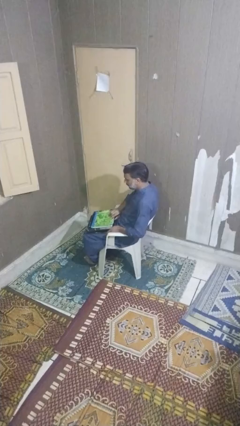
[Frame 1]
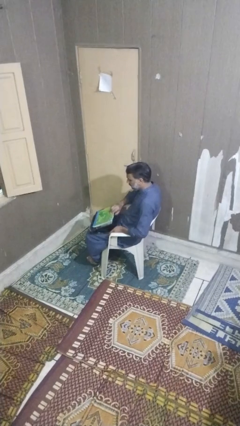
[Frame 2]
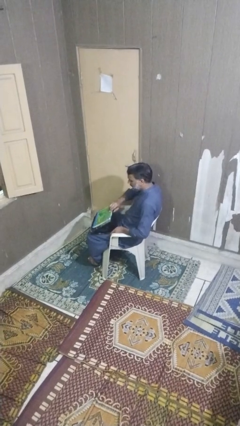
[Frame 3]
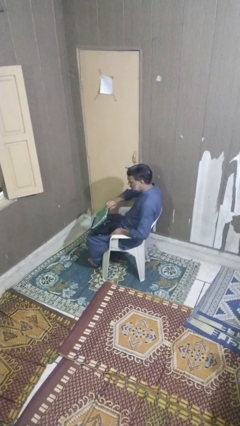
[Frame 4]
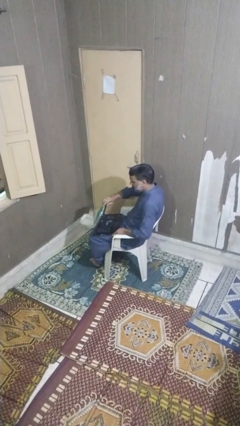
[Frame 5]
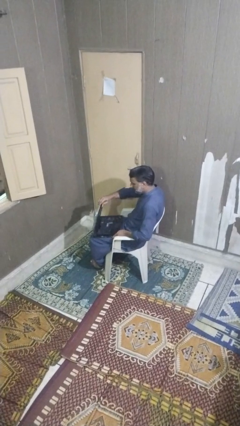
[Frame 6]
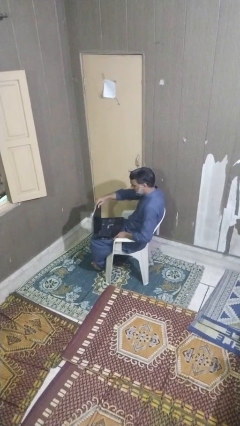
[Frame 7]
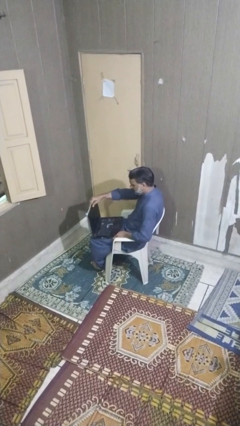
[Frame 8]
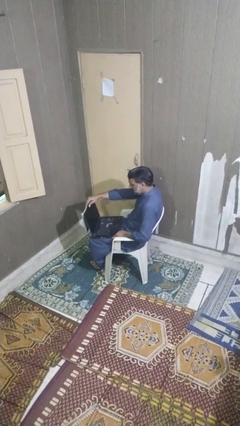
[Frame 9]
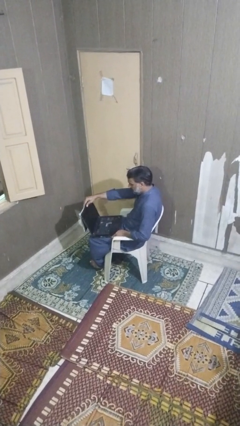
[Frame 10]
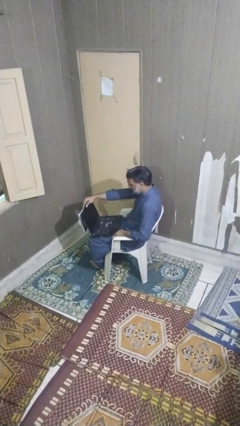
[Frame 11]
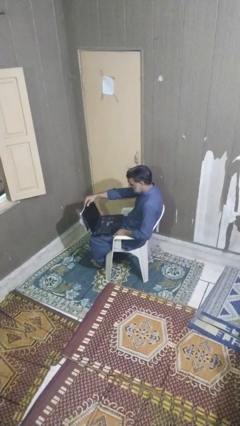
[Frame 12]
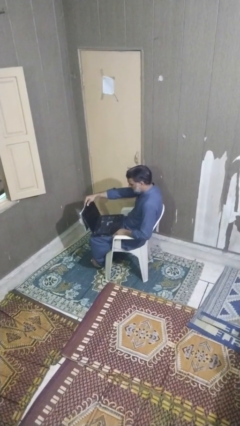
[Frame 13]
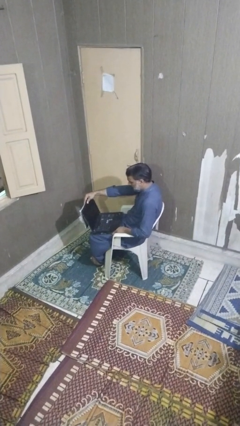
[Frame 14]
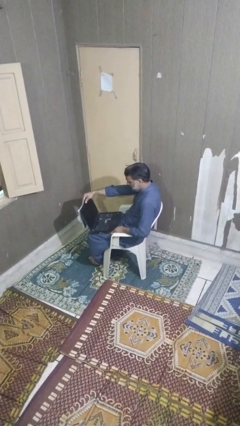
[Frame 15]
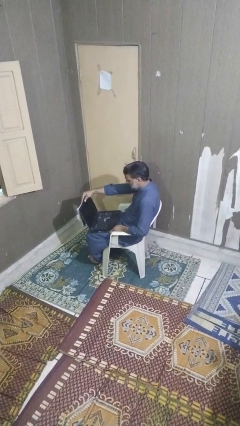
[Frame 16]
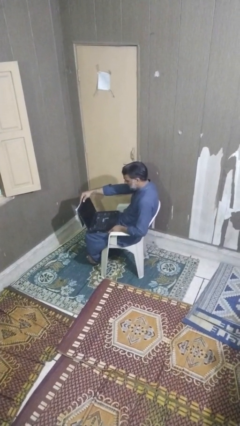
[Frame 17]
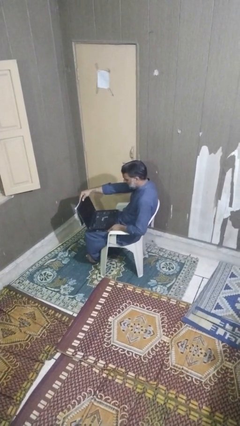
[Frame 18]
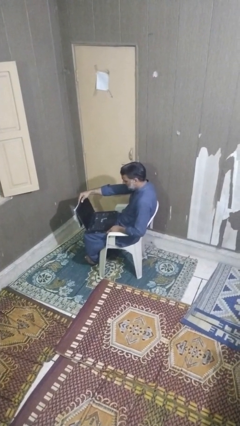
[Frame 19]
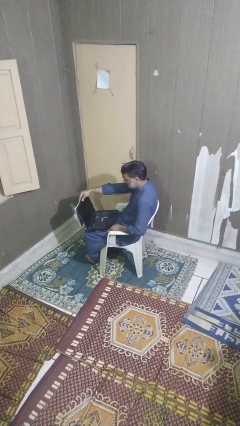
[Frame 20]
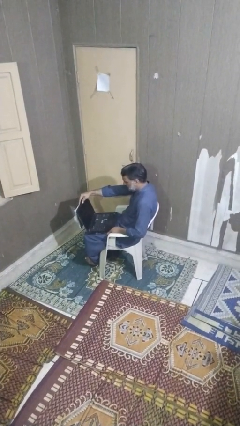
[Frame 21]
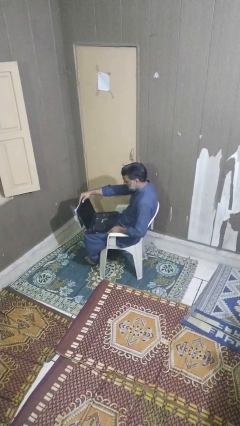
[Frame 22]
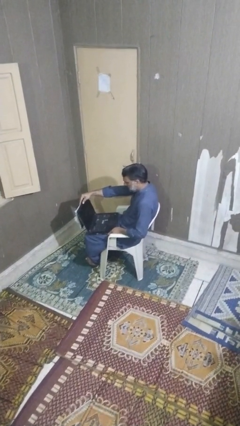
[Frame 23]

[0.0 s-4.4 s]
person opens laptop

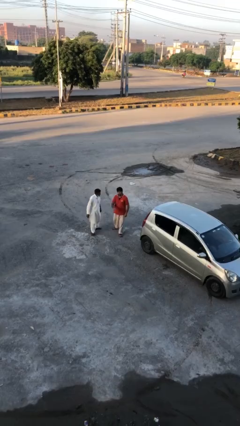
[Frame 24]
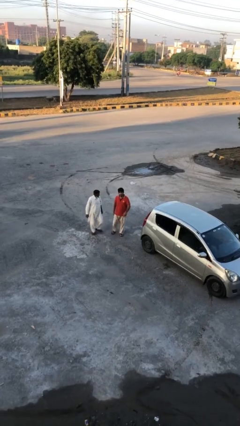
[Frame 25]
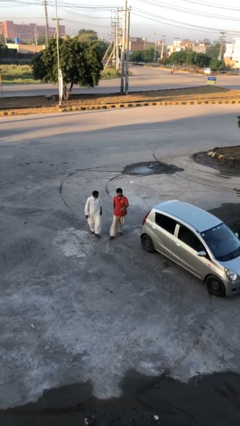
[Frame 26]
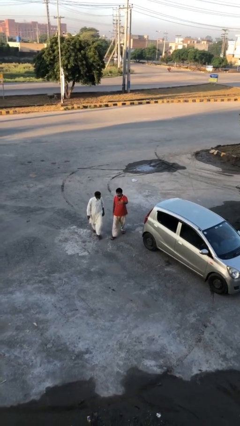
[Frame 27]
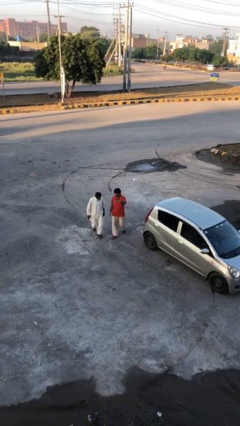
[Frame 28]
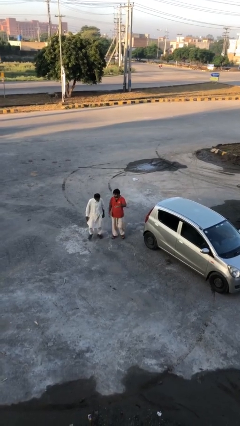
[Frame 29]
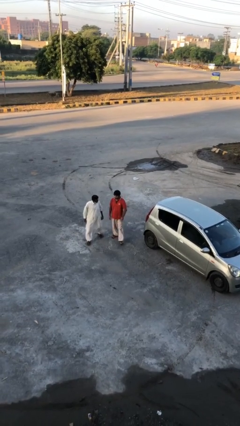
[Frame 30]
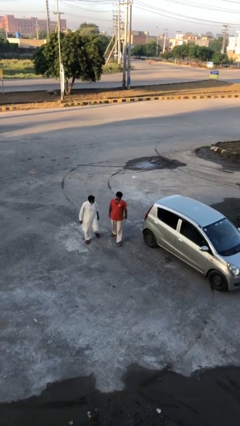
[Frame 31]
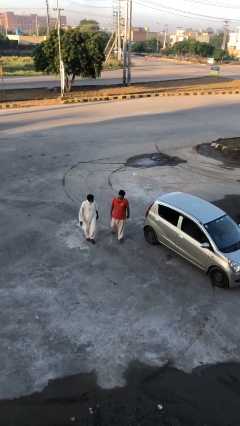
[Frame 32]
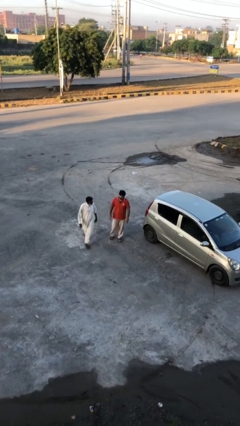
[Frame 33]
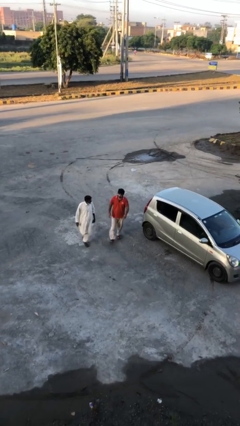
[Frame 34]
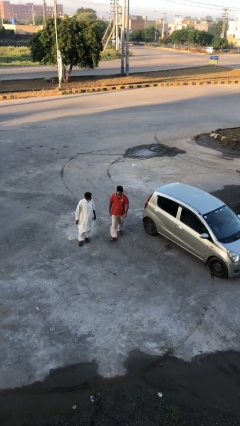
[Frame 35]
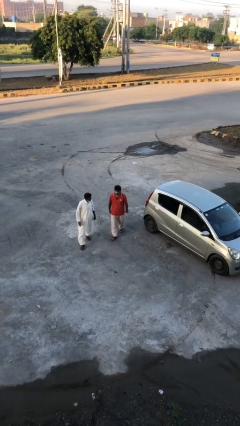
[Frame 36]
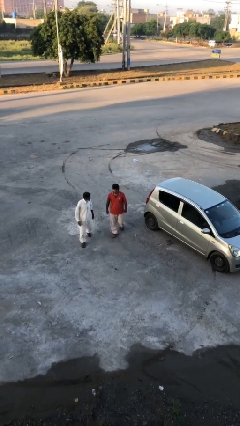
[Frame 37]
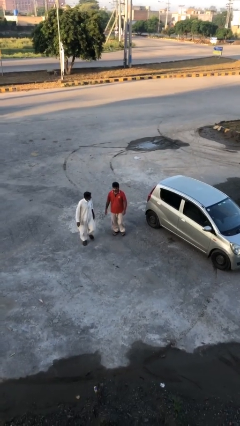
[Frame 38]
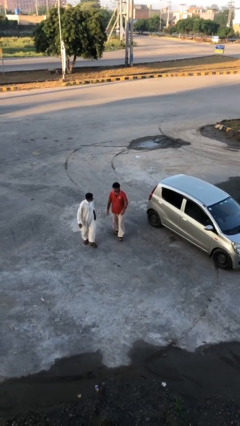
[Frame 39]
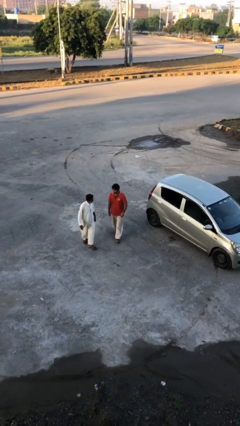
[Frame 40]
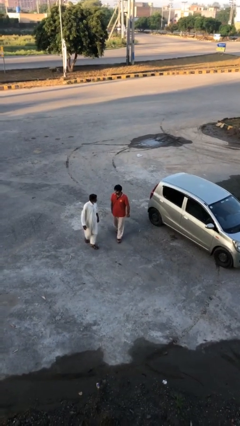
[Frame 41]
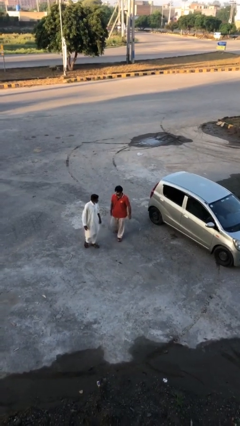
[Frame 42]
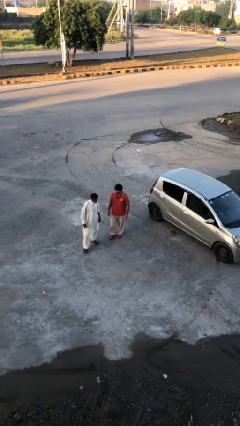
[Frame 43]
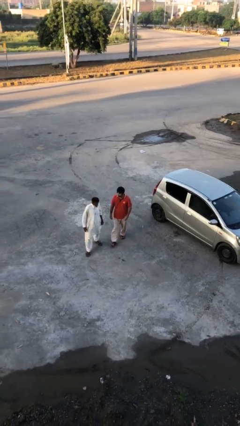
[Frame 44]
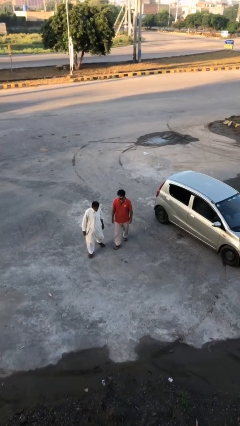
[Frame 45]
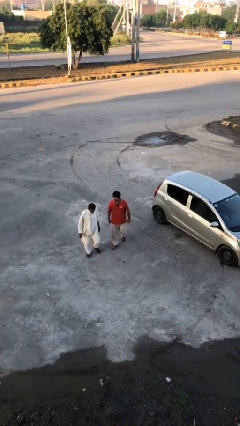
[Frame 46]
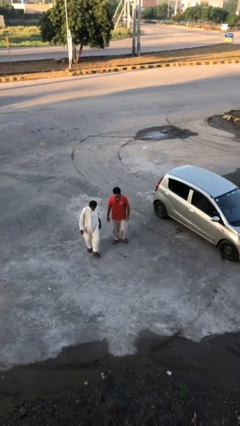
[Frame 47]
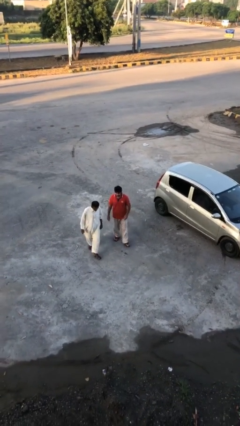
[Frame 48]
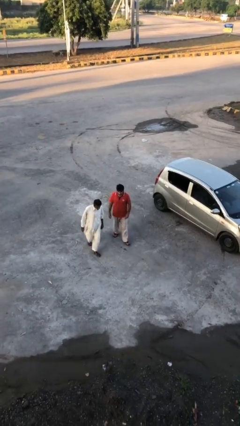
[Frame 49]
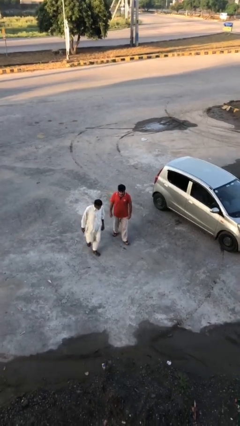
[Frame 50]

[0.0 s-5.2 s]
person talks to person

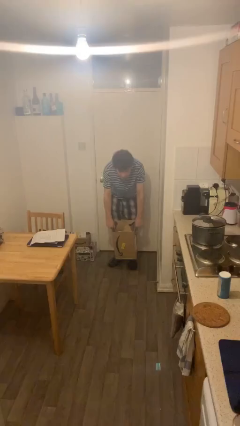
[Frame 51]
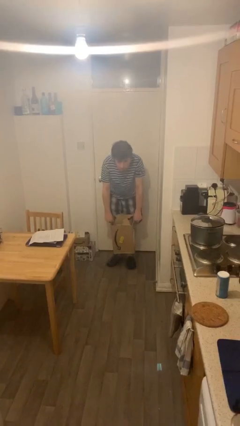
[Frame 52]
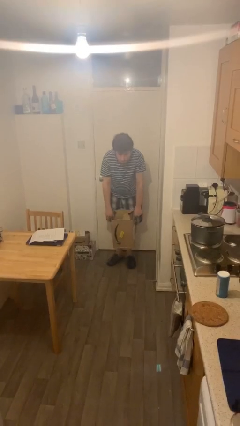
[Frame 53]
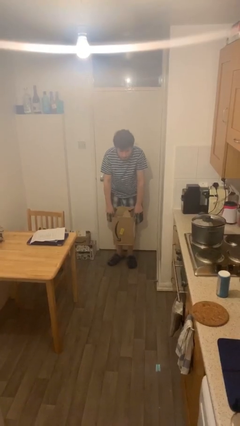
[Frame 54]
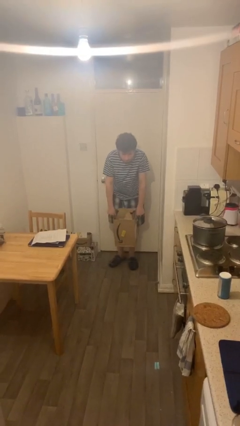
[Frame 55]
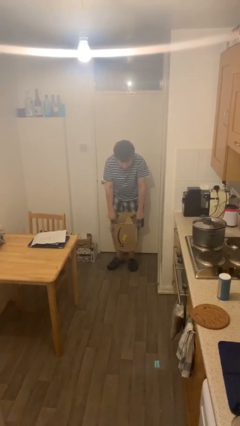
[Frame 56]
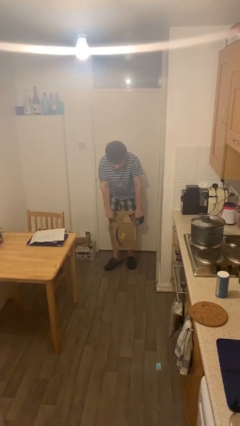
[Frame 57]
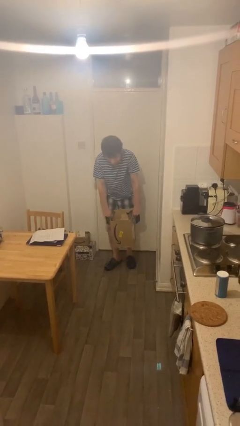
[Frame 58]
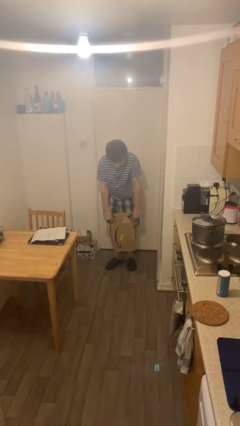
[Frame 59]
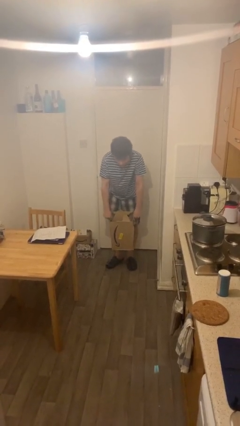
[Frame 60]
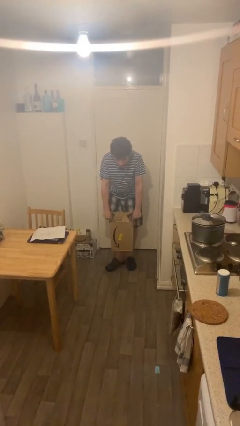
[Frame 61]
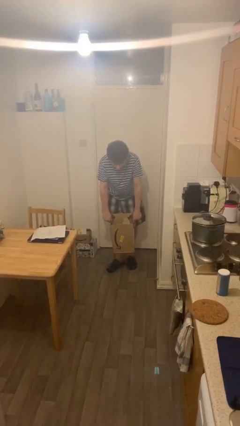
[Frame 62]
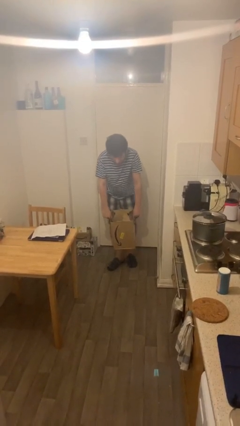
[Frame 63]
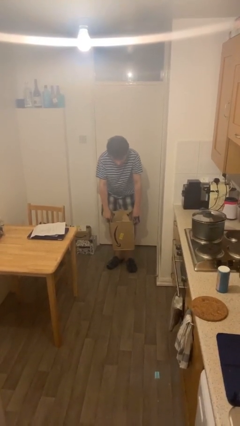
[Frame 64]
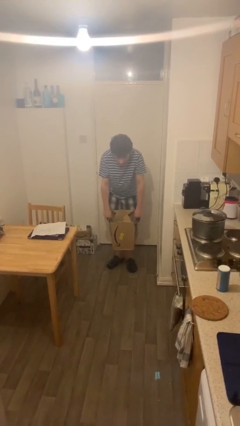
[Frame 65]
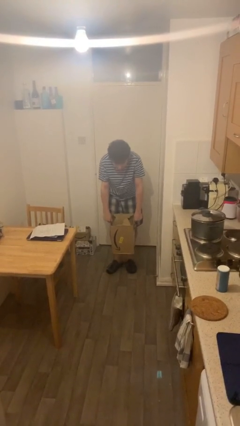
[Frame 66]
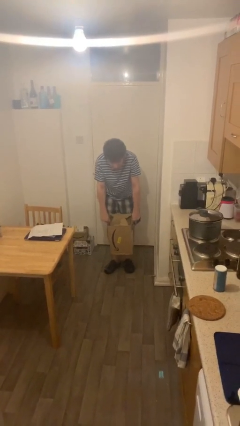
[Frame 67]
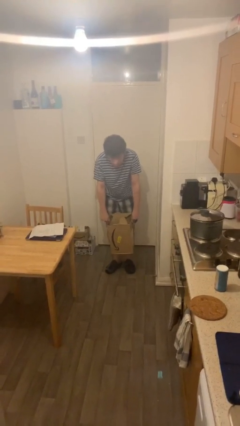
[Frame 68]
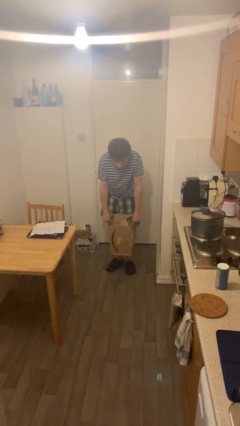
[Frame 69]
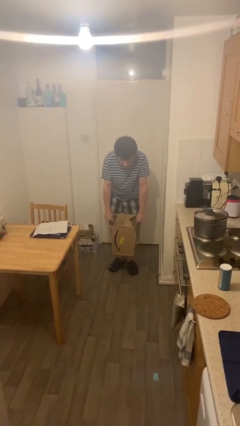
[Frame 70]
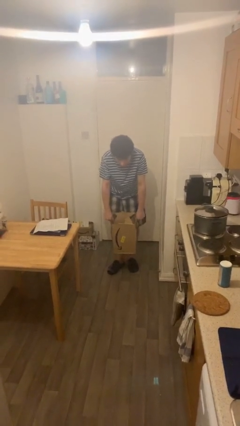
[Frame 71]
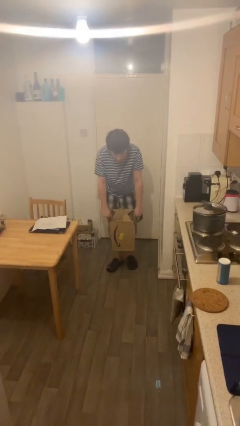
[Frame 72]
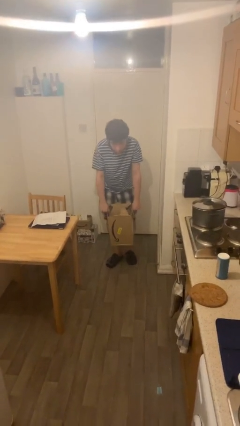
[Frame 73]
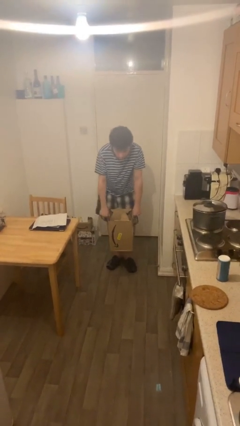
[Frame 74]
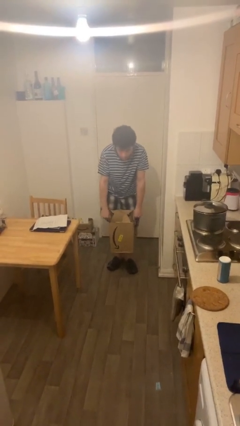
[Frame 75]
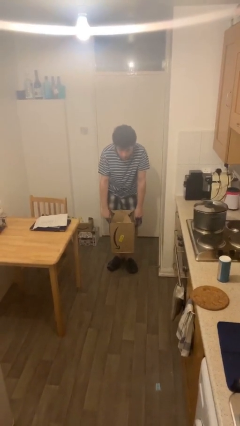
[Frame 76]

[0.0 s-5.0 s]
person carries heavy object

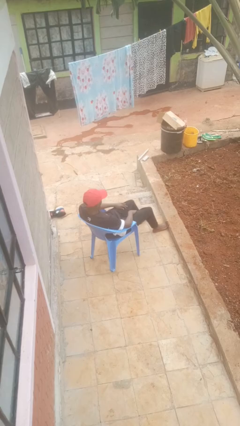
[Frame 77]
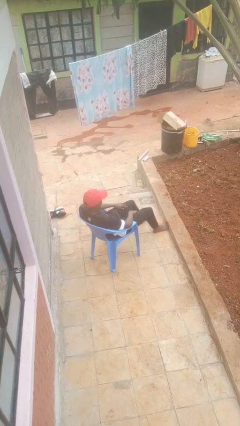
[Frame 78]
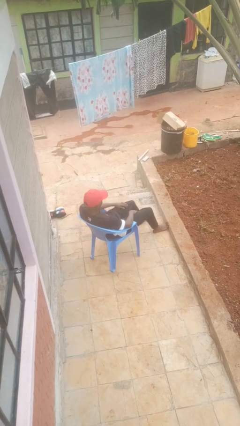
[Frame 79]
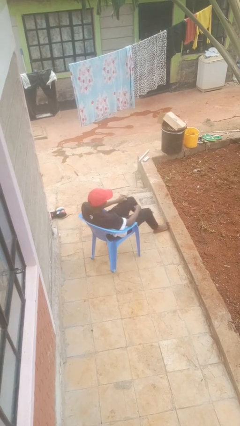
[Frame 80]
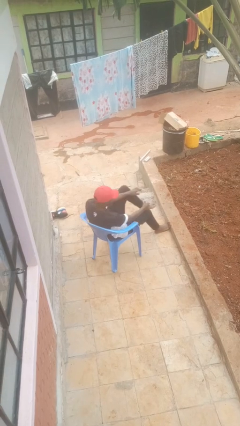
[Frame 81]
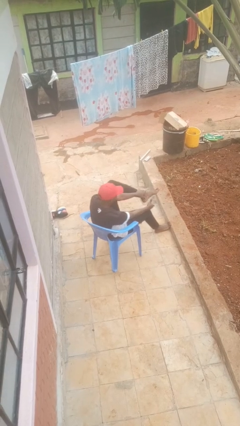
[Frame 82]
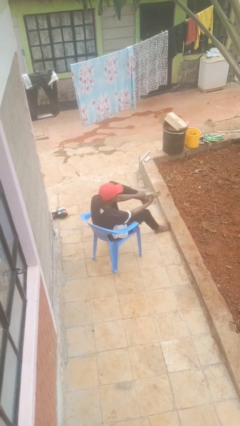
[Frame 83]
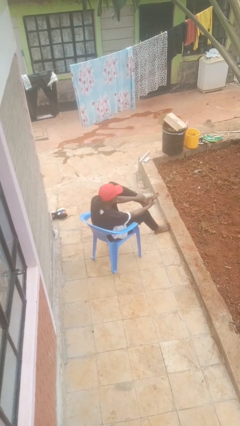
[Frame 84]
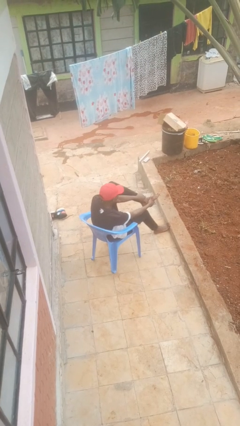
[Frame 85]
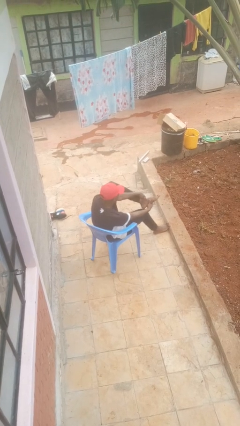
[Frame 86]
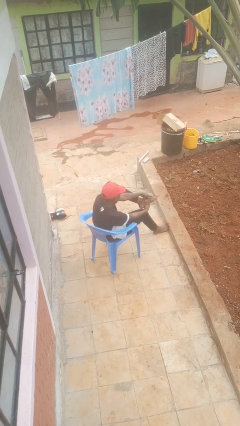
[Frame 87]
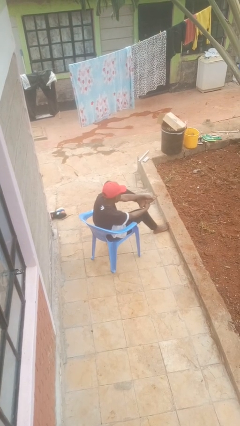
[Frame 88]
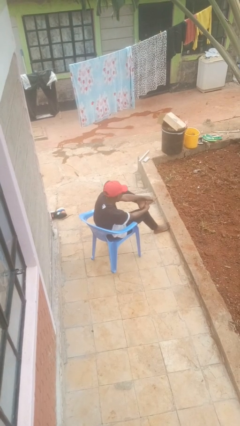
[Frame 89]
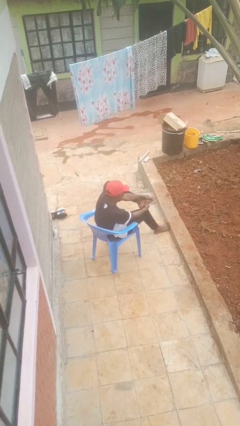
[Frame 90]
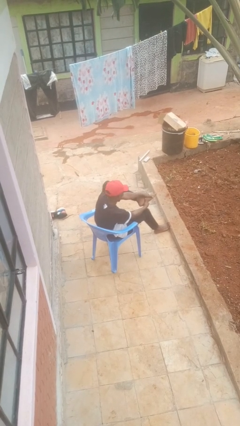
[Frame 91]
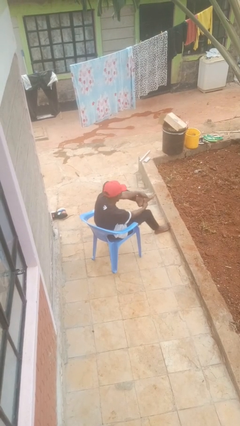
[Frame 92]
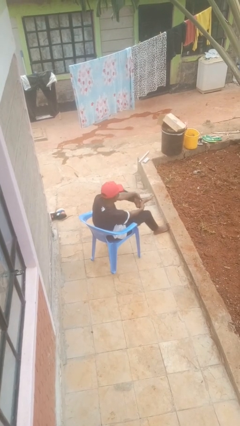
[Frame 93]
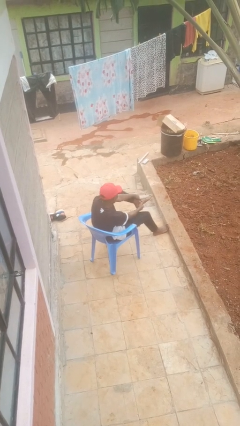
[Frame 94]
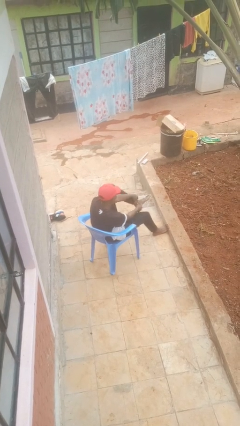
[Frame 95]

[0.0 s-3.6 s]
person rubs foot
